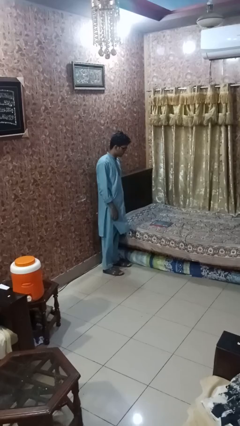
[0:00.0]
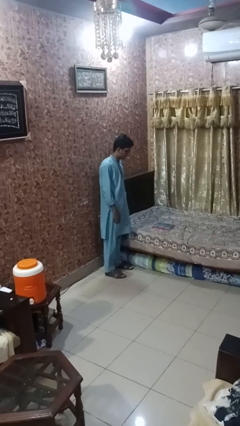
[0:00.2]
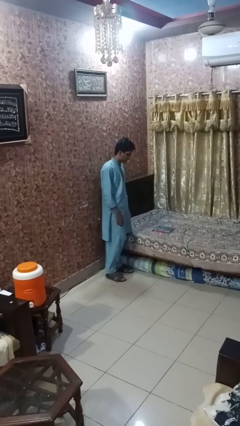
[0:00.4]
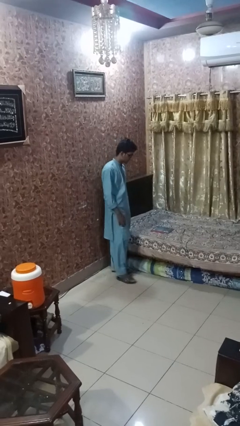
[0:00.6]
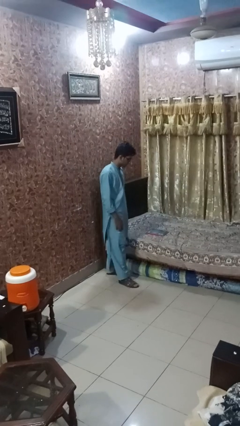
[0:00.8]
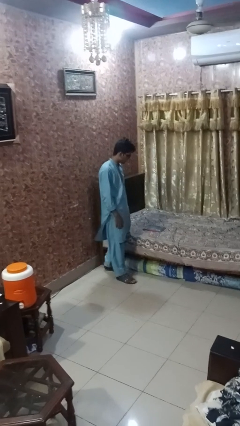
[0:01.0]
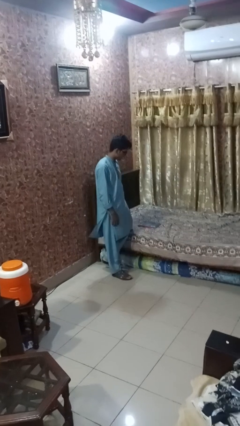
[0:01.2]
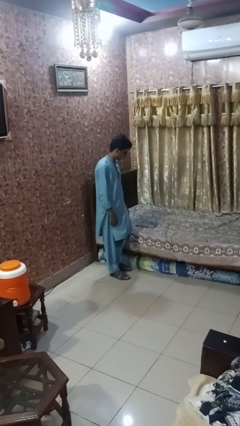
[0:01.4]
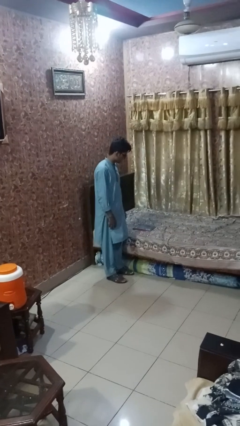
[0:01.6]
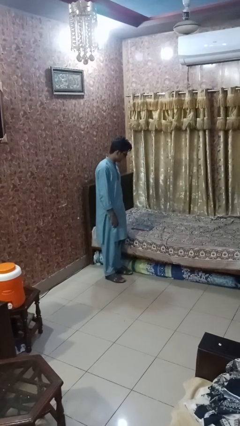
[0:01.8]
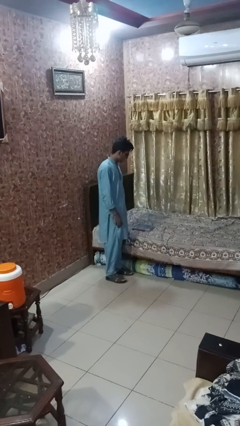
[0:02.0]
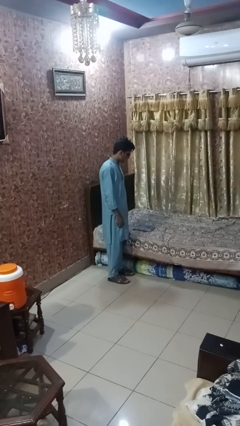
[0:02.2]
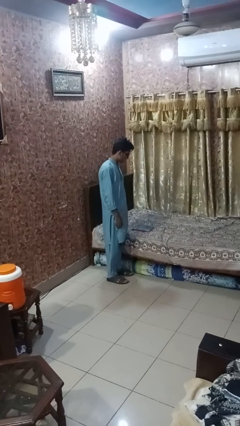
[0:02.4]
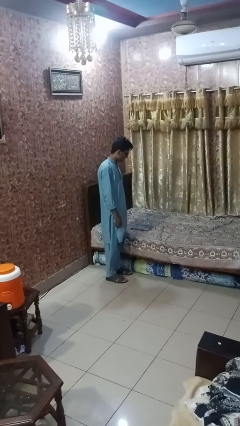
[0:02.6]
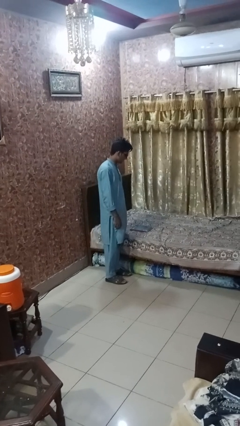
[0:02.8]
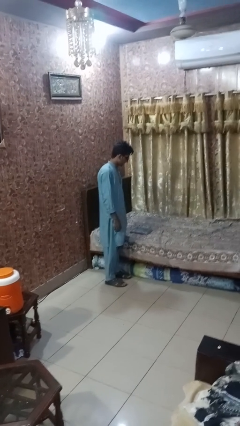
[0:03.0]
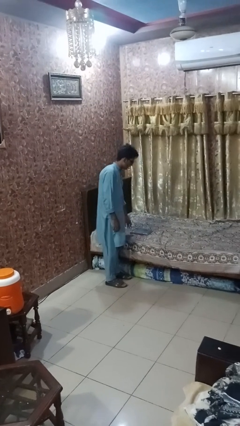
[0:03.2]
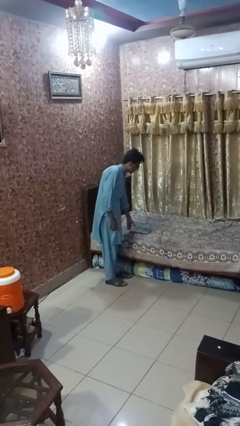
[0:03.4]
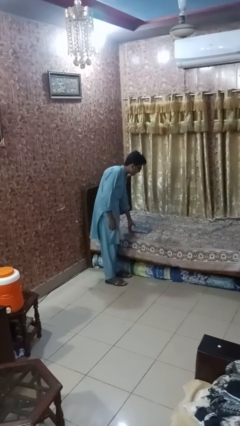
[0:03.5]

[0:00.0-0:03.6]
person puts down object on bed

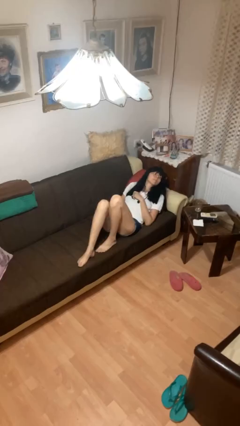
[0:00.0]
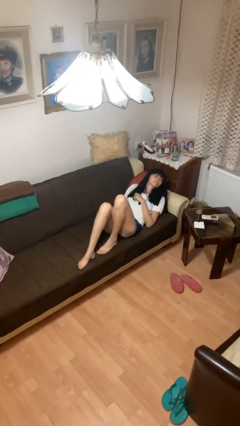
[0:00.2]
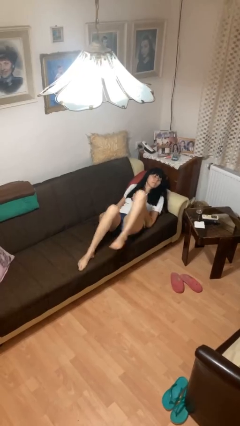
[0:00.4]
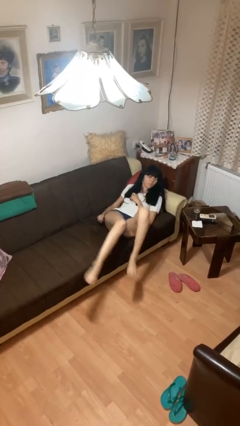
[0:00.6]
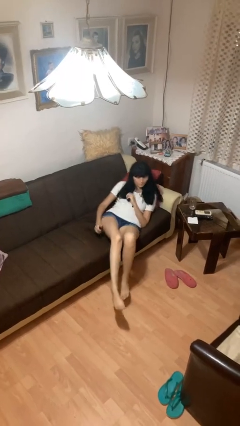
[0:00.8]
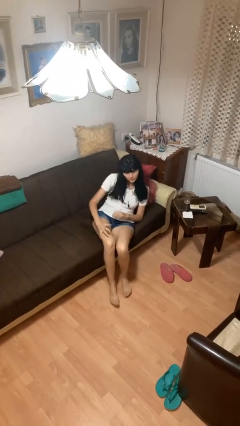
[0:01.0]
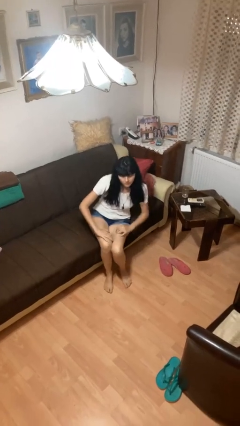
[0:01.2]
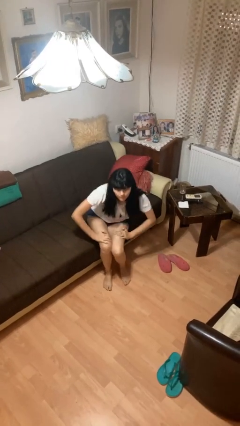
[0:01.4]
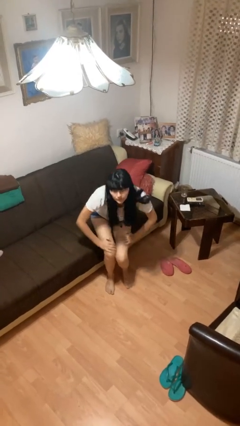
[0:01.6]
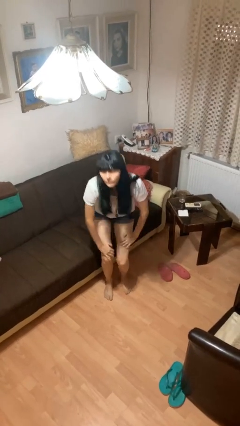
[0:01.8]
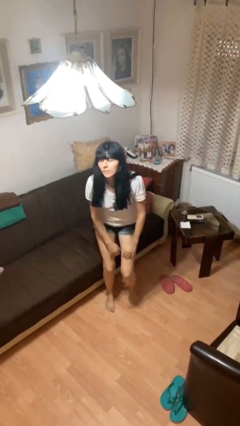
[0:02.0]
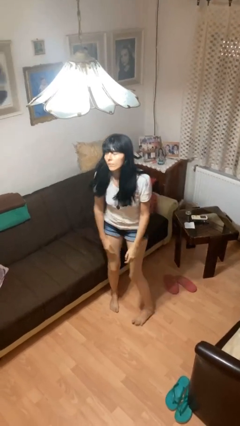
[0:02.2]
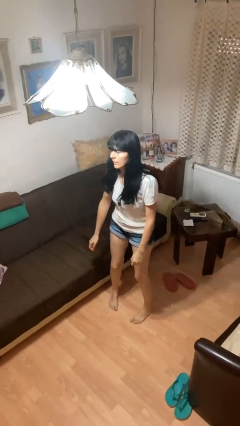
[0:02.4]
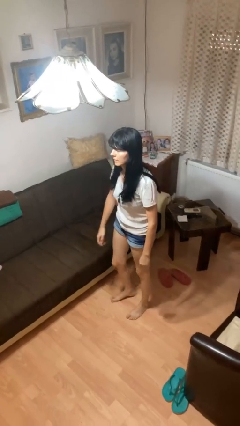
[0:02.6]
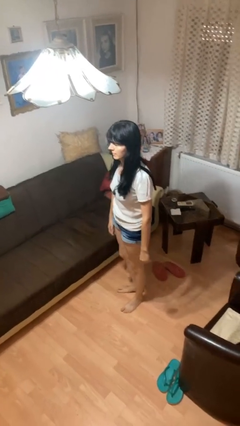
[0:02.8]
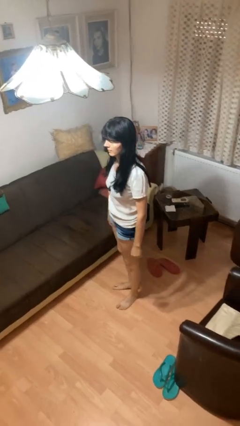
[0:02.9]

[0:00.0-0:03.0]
person stands up

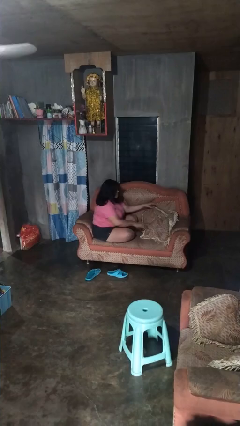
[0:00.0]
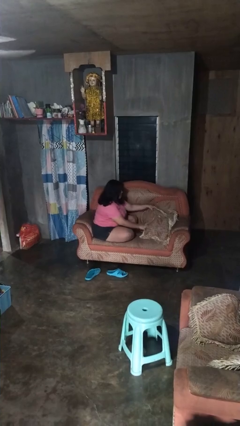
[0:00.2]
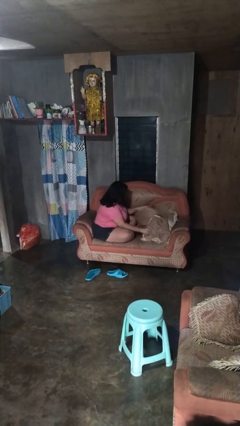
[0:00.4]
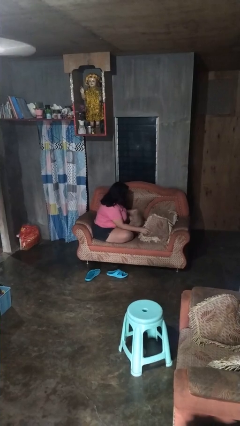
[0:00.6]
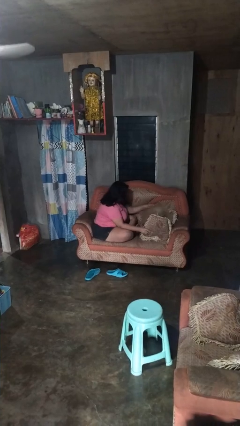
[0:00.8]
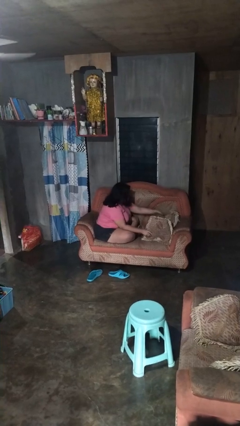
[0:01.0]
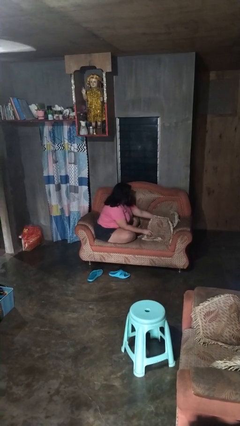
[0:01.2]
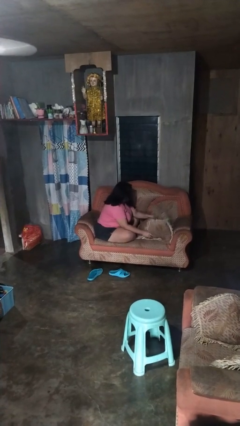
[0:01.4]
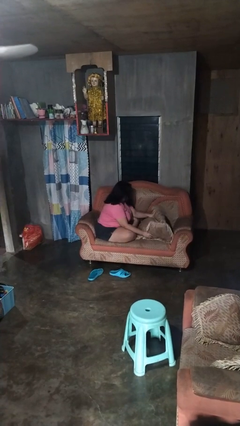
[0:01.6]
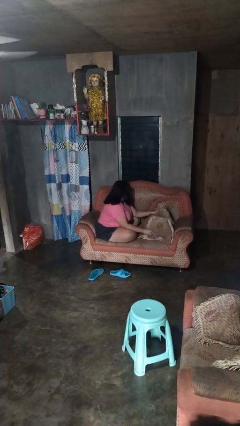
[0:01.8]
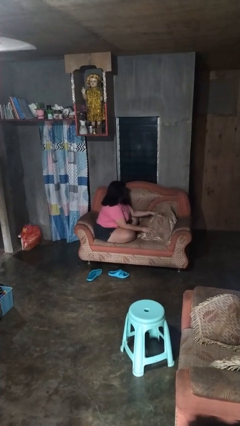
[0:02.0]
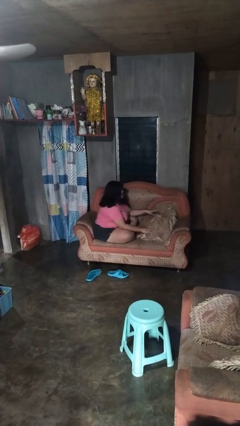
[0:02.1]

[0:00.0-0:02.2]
person searches in couch

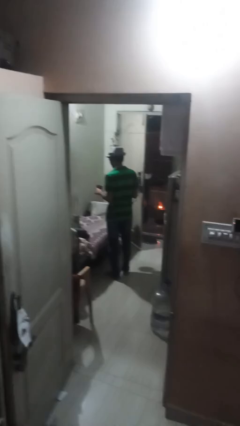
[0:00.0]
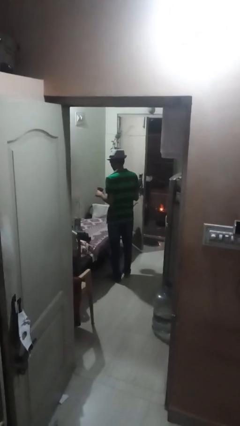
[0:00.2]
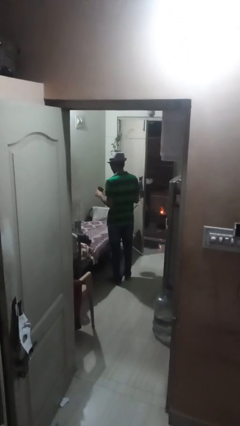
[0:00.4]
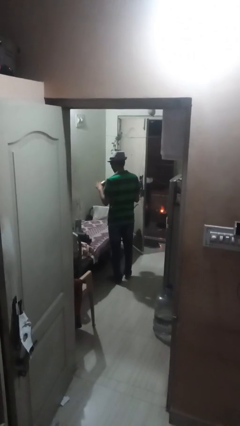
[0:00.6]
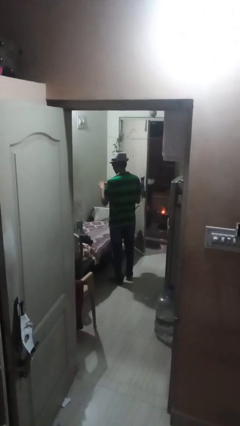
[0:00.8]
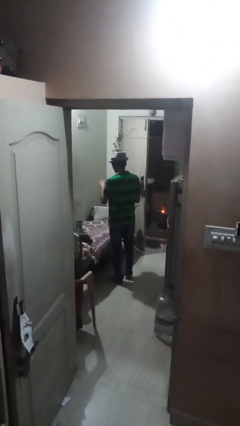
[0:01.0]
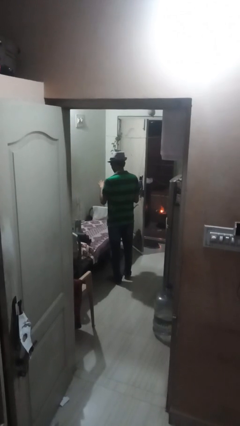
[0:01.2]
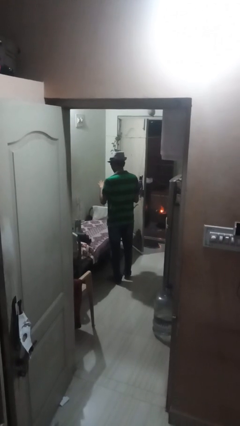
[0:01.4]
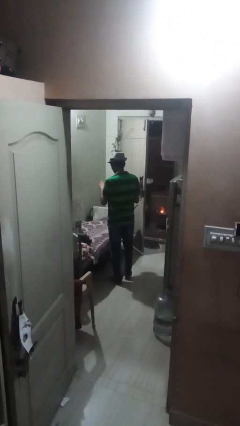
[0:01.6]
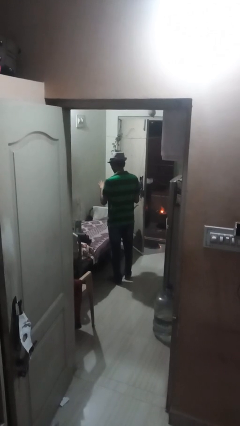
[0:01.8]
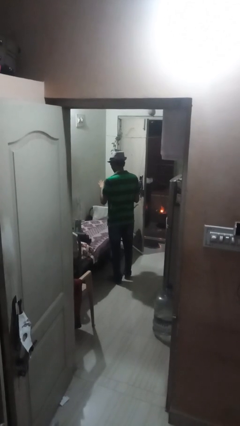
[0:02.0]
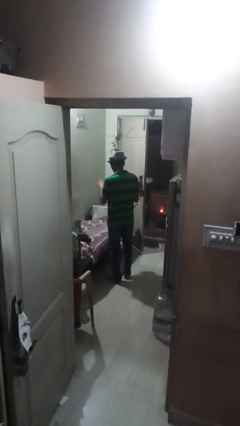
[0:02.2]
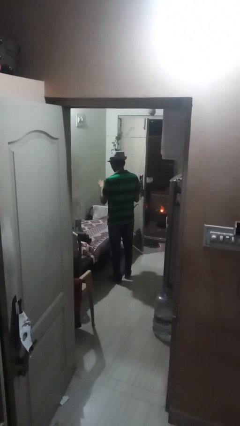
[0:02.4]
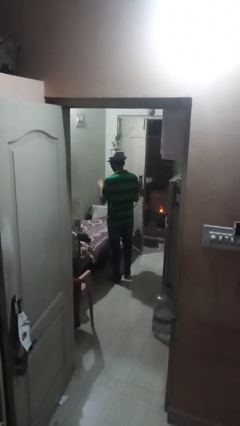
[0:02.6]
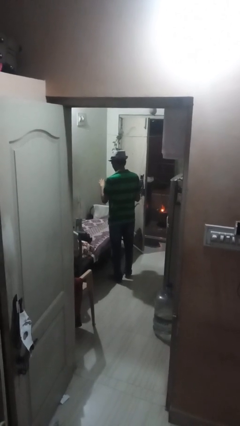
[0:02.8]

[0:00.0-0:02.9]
person pours coffee into mug

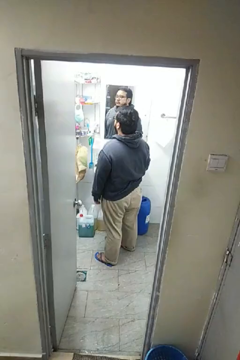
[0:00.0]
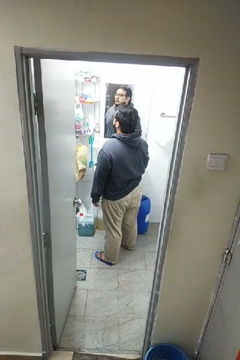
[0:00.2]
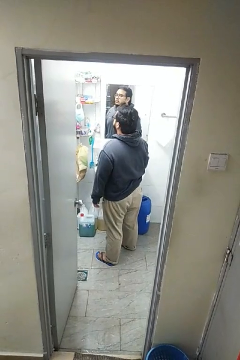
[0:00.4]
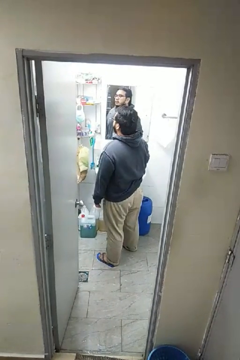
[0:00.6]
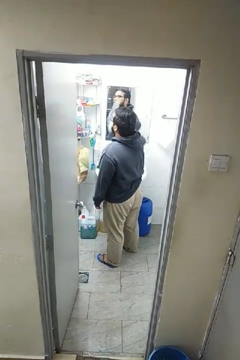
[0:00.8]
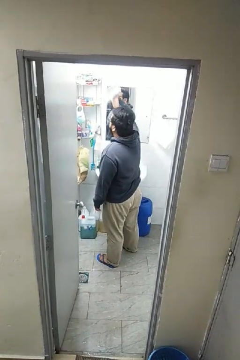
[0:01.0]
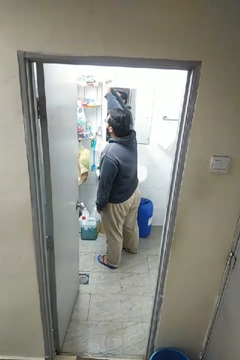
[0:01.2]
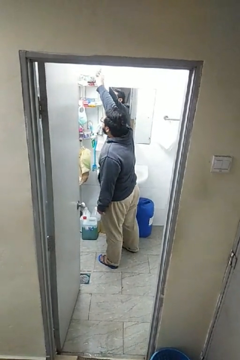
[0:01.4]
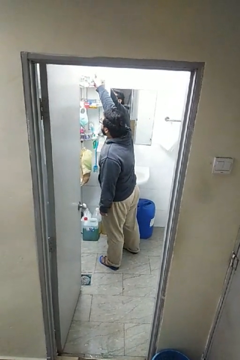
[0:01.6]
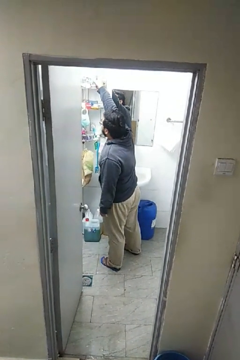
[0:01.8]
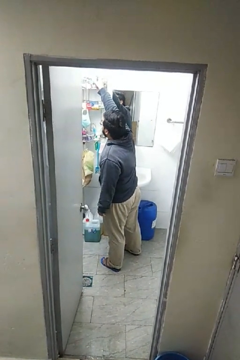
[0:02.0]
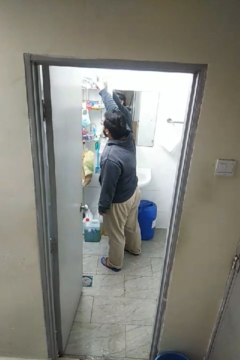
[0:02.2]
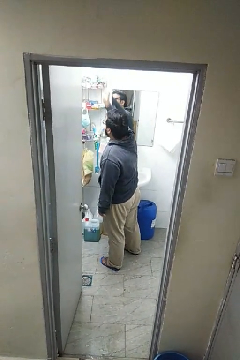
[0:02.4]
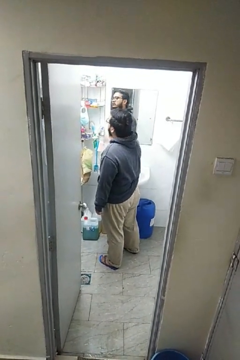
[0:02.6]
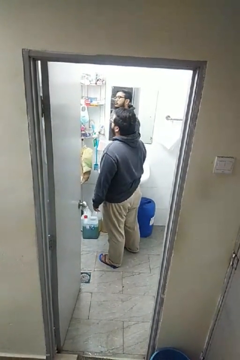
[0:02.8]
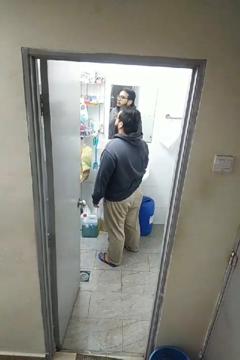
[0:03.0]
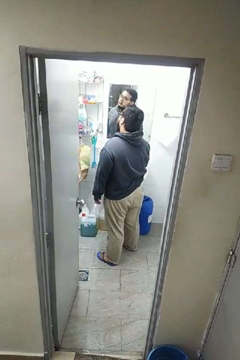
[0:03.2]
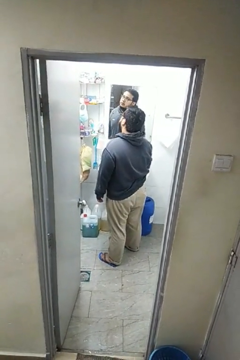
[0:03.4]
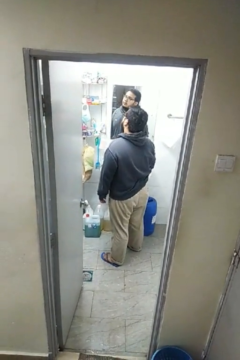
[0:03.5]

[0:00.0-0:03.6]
person puts down object on countertop

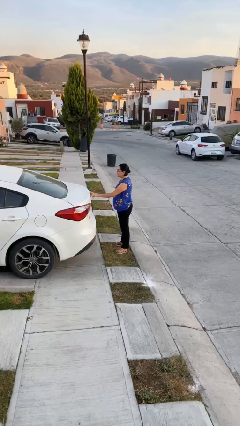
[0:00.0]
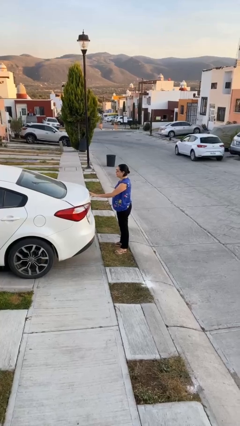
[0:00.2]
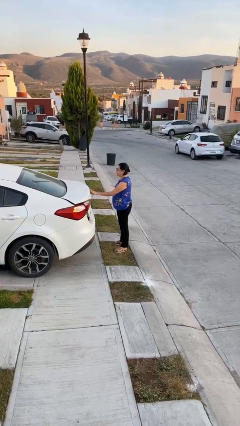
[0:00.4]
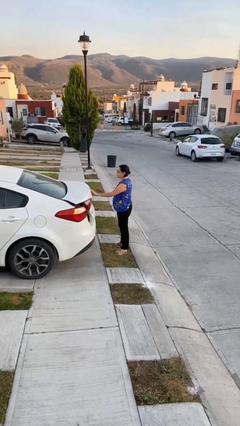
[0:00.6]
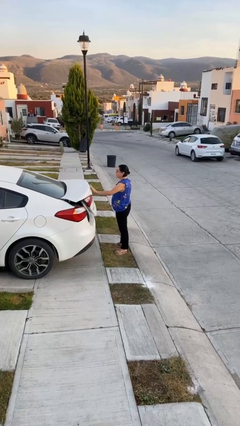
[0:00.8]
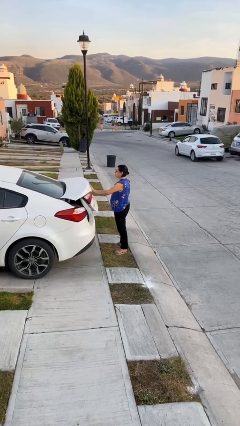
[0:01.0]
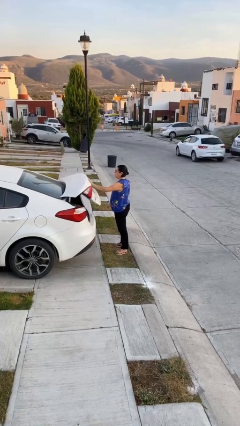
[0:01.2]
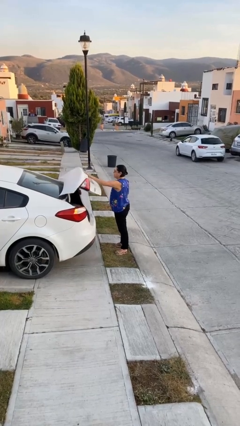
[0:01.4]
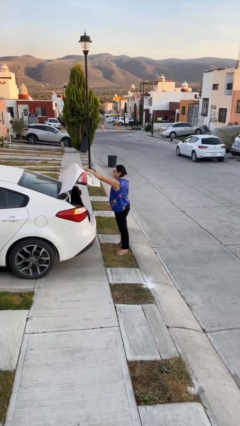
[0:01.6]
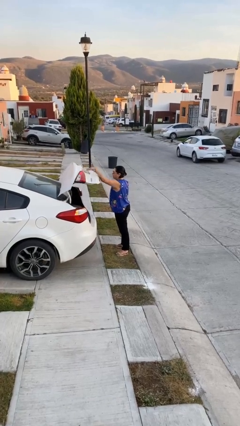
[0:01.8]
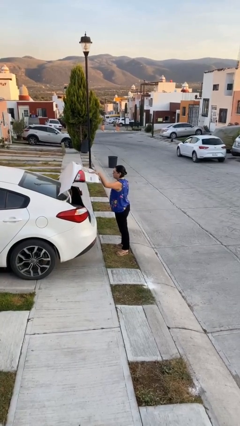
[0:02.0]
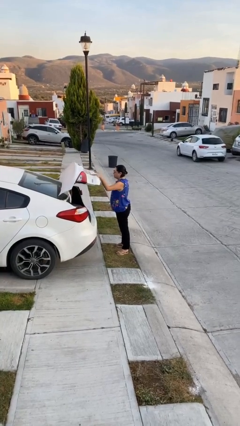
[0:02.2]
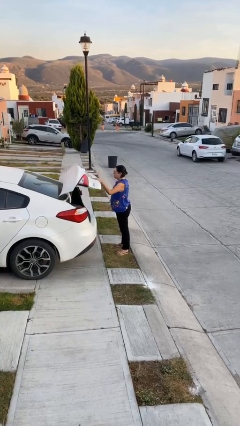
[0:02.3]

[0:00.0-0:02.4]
person opens car trunk

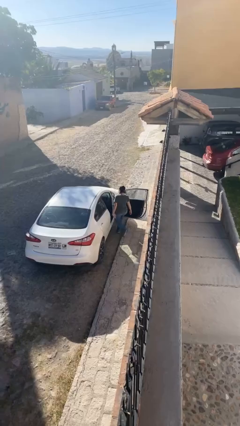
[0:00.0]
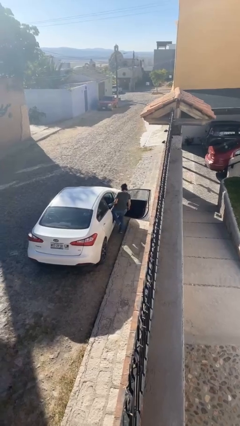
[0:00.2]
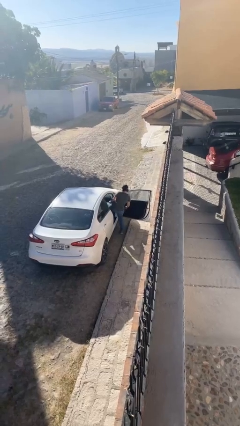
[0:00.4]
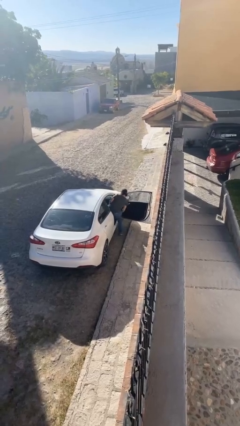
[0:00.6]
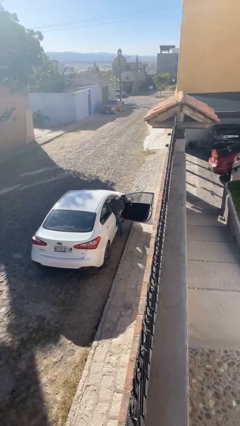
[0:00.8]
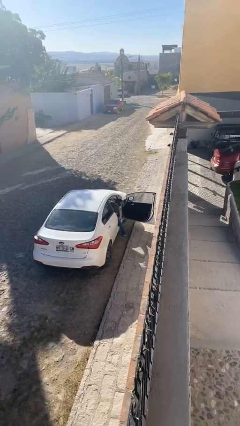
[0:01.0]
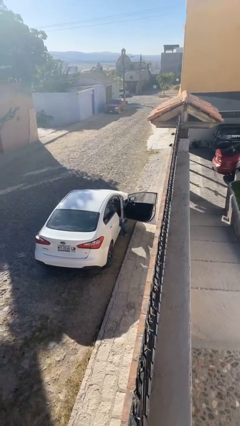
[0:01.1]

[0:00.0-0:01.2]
person enters car
